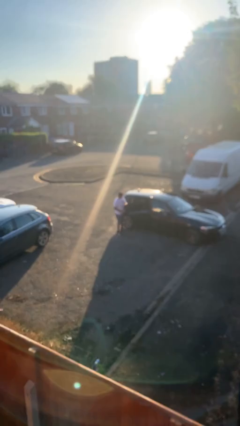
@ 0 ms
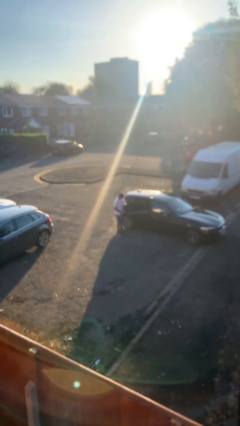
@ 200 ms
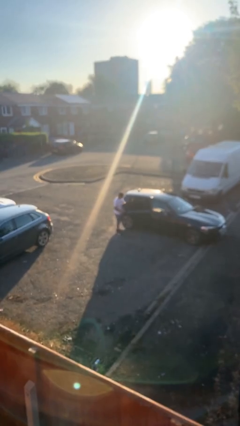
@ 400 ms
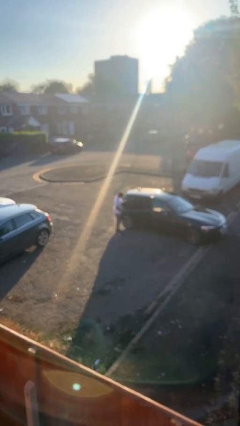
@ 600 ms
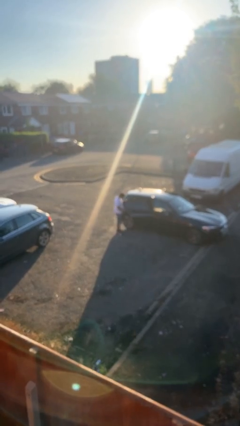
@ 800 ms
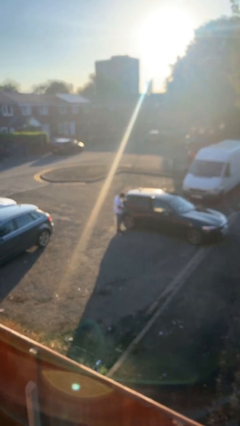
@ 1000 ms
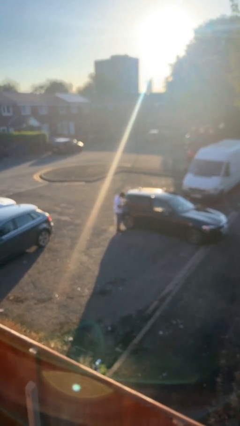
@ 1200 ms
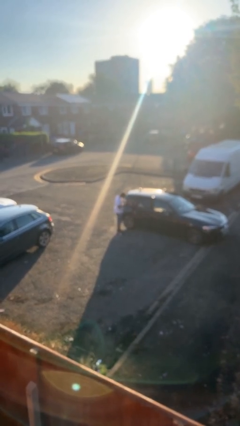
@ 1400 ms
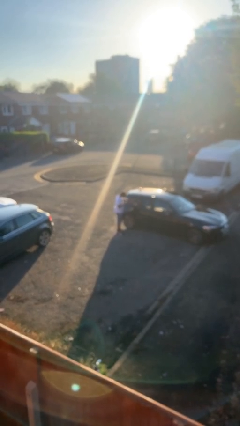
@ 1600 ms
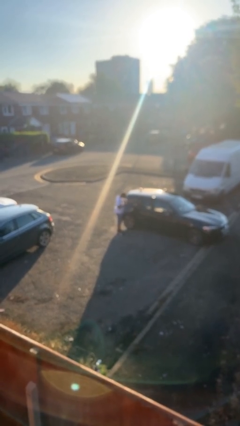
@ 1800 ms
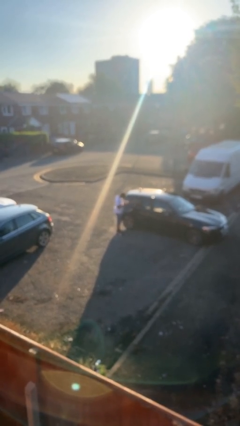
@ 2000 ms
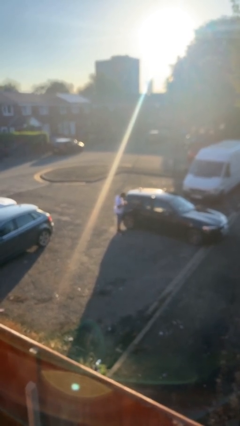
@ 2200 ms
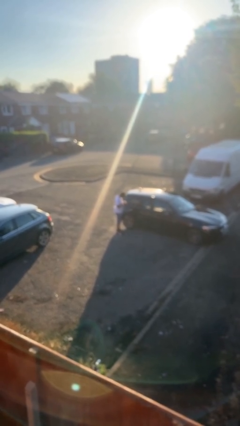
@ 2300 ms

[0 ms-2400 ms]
person closes car door

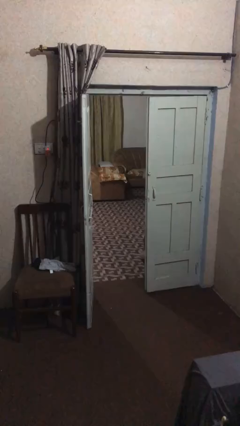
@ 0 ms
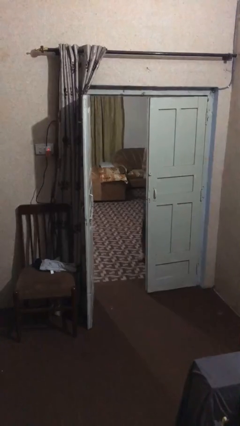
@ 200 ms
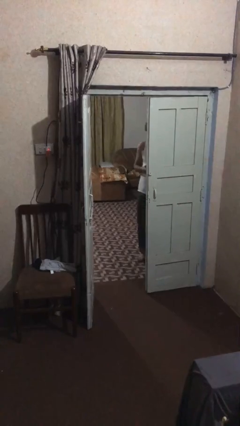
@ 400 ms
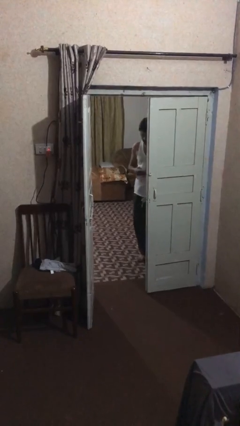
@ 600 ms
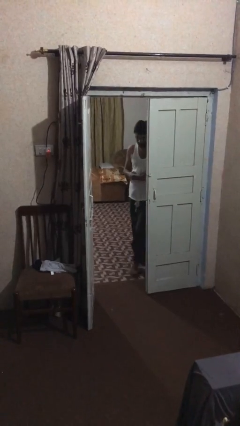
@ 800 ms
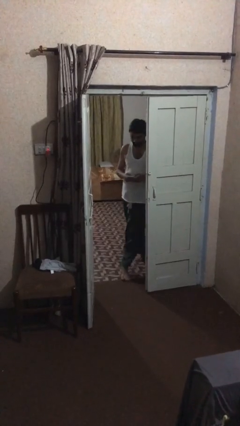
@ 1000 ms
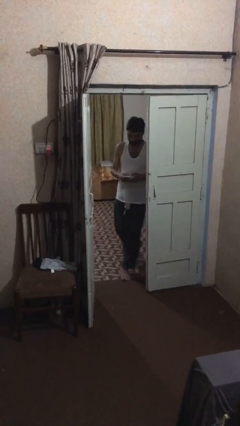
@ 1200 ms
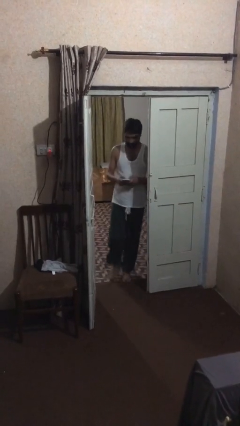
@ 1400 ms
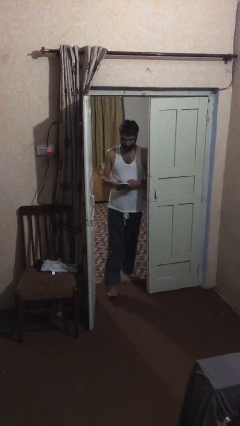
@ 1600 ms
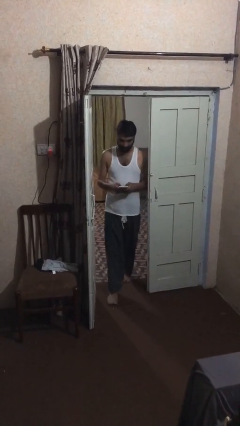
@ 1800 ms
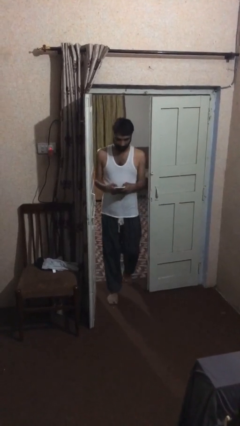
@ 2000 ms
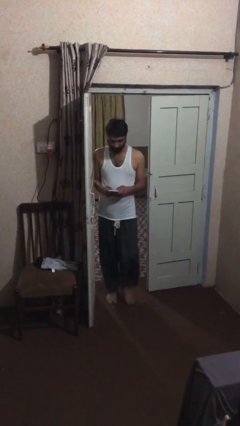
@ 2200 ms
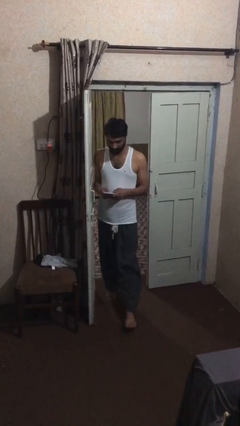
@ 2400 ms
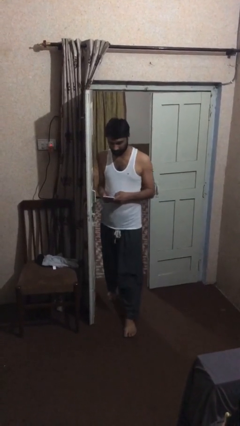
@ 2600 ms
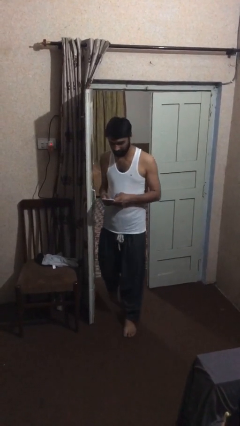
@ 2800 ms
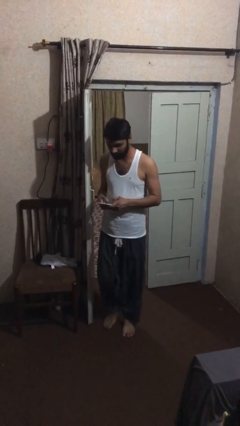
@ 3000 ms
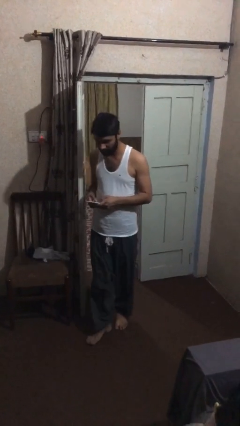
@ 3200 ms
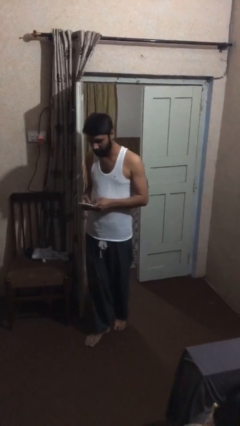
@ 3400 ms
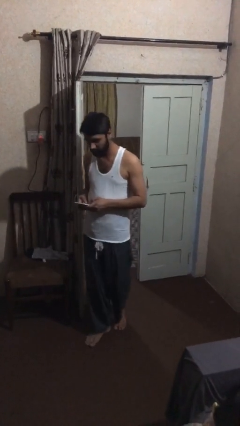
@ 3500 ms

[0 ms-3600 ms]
person enters scene through structure

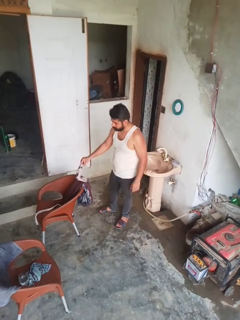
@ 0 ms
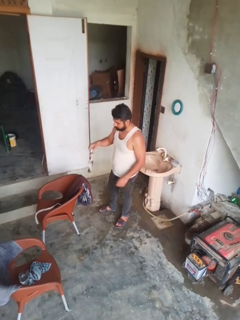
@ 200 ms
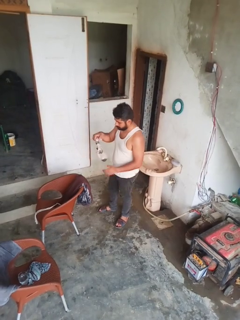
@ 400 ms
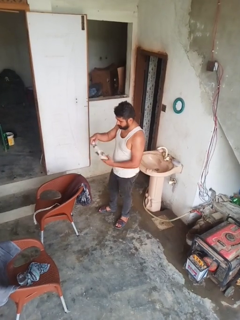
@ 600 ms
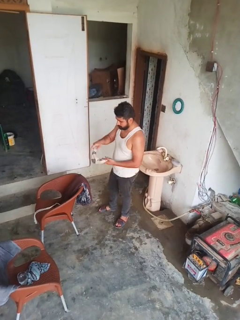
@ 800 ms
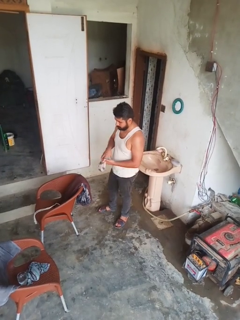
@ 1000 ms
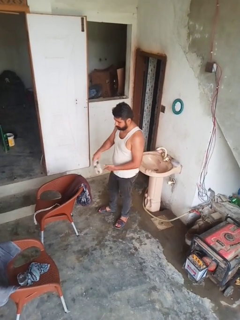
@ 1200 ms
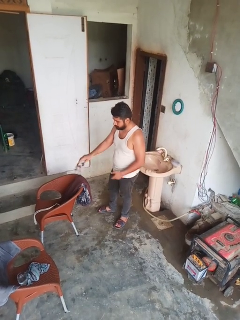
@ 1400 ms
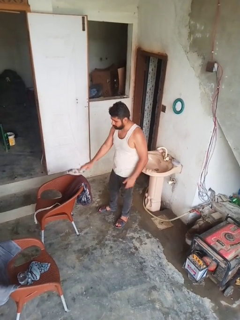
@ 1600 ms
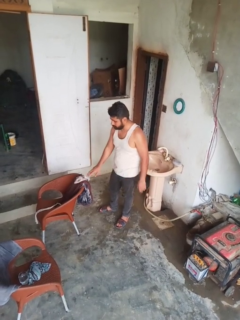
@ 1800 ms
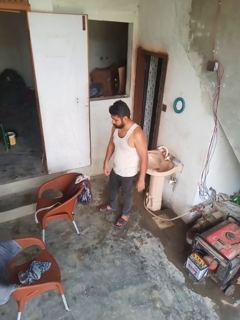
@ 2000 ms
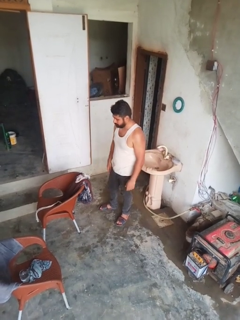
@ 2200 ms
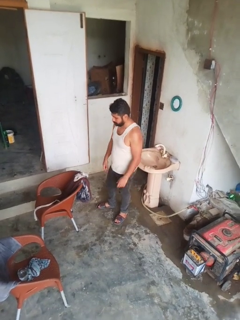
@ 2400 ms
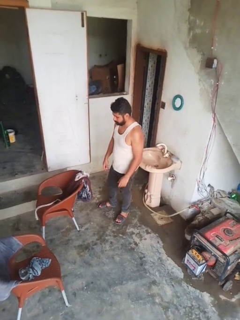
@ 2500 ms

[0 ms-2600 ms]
person folds socks

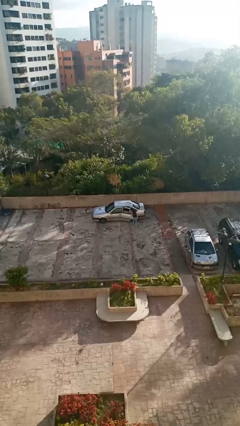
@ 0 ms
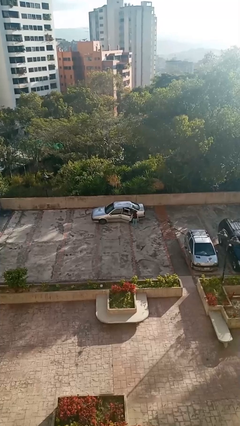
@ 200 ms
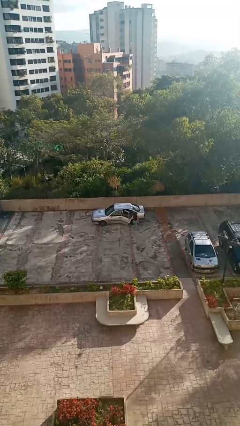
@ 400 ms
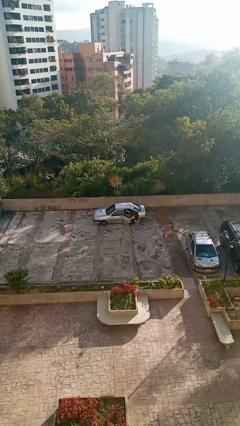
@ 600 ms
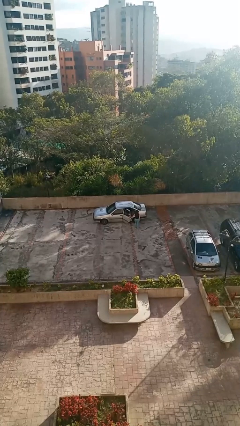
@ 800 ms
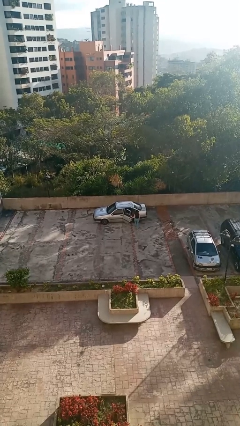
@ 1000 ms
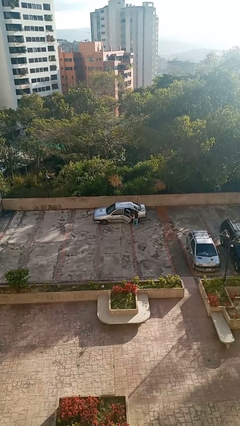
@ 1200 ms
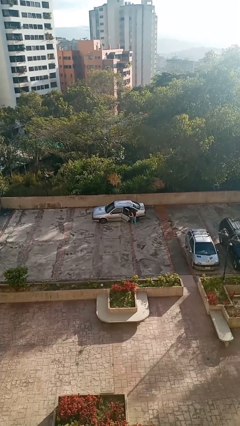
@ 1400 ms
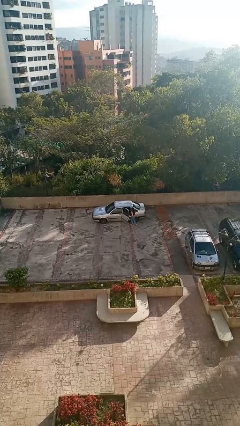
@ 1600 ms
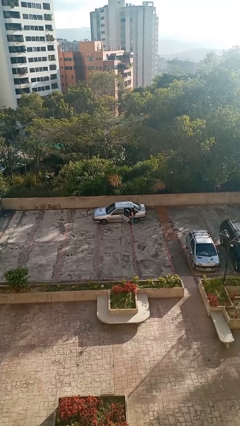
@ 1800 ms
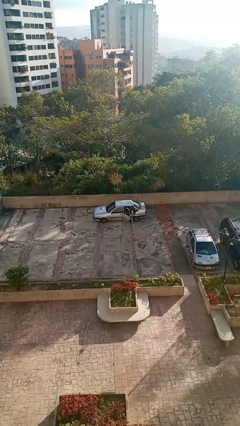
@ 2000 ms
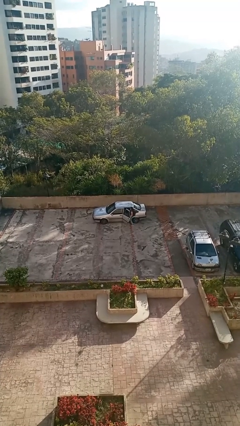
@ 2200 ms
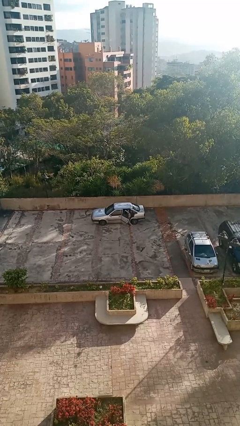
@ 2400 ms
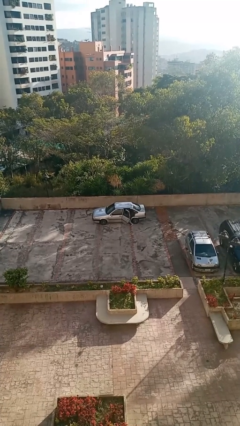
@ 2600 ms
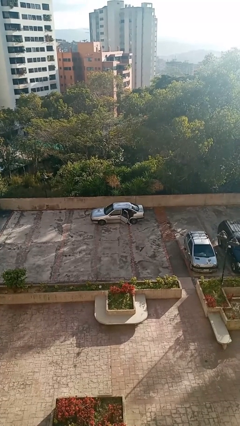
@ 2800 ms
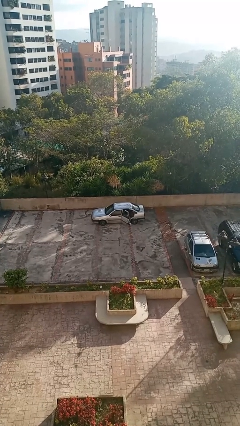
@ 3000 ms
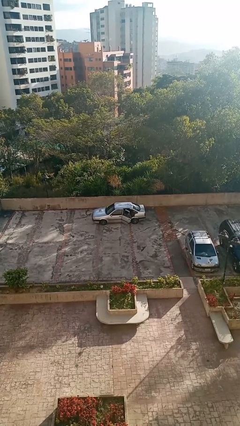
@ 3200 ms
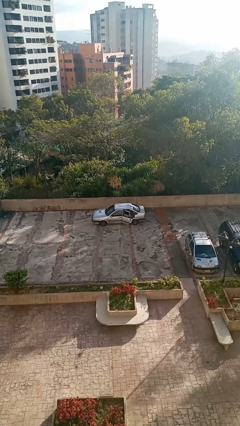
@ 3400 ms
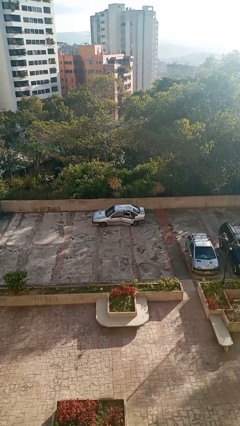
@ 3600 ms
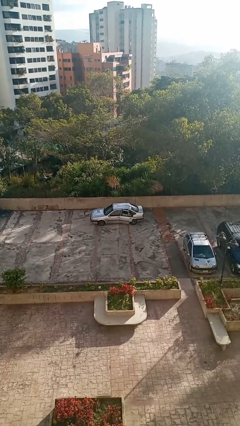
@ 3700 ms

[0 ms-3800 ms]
car picks up person

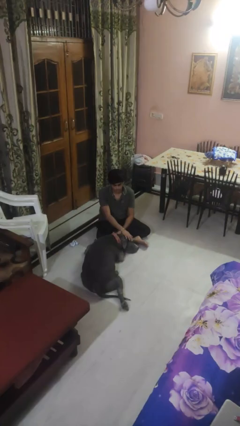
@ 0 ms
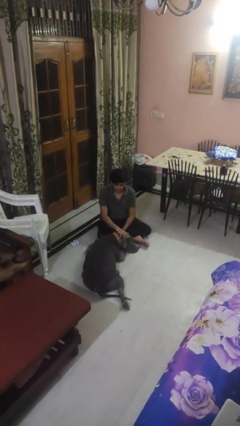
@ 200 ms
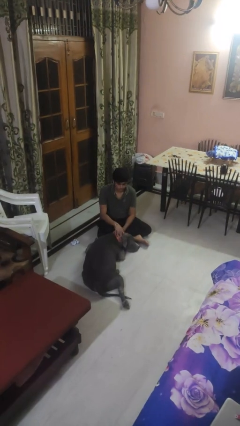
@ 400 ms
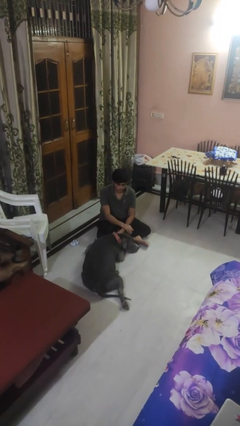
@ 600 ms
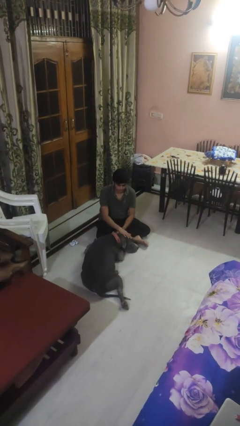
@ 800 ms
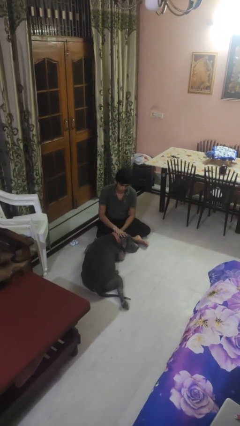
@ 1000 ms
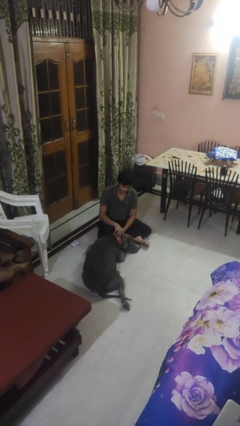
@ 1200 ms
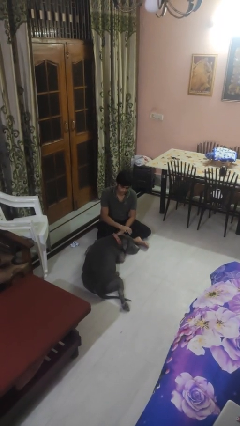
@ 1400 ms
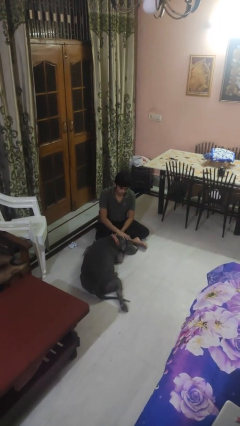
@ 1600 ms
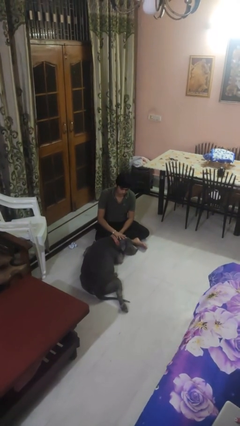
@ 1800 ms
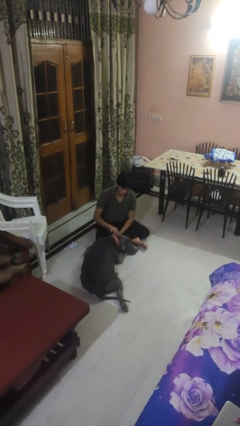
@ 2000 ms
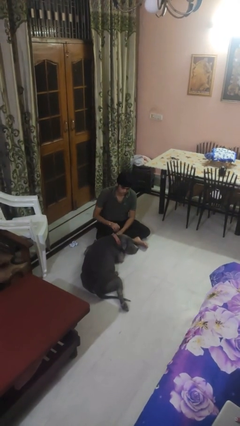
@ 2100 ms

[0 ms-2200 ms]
person pets dog

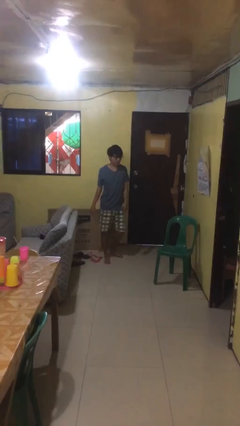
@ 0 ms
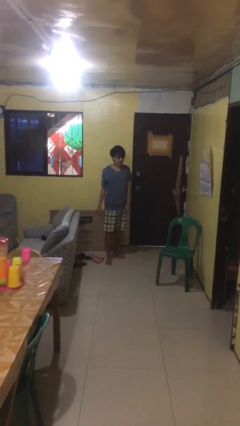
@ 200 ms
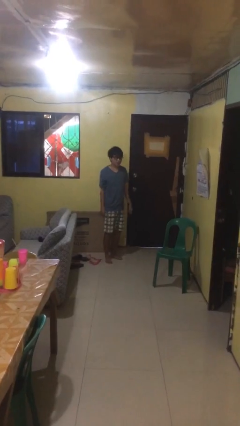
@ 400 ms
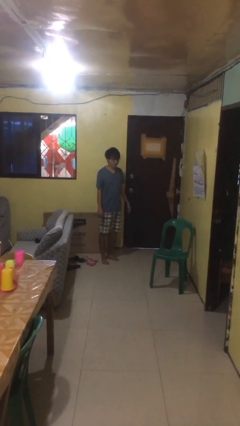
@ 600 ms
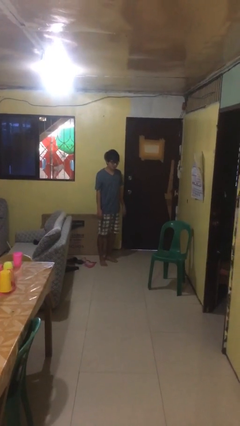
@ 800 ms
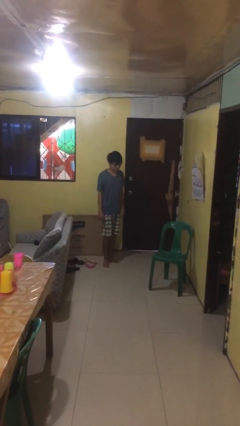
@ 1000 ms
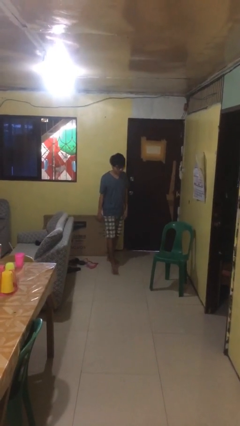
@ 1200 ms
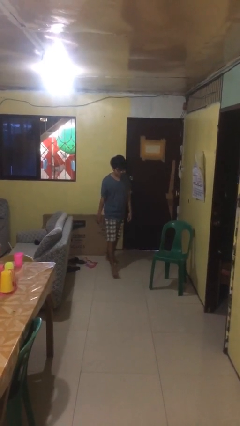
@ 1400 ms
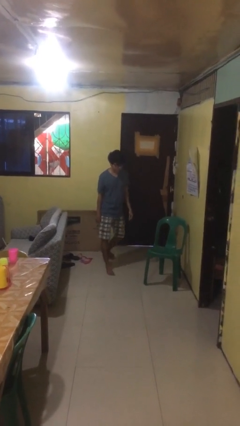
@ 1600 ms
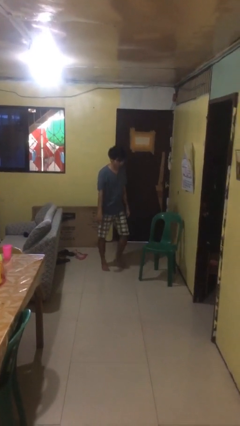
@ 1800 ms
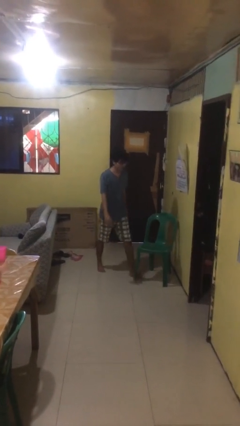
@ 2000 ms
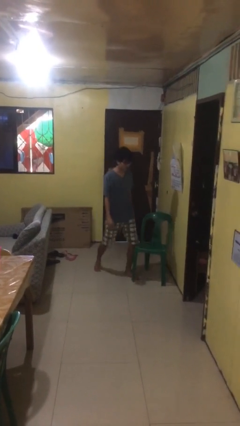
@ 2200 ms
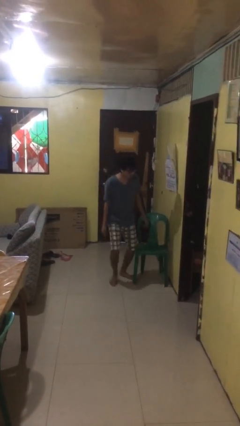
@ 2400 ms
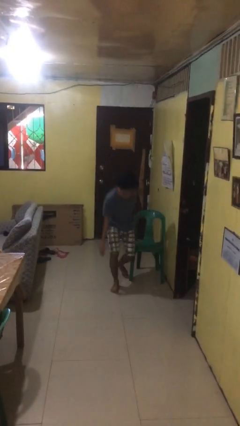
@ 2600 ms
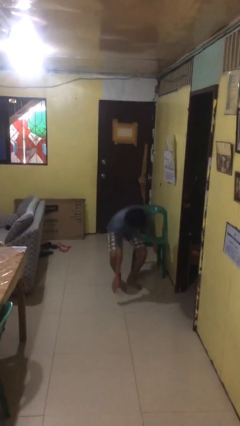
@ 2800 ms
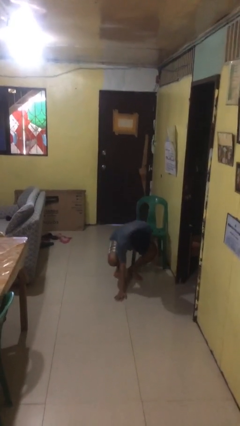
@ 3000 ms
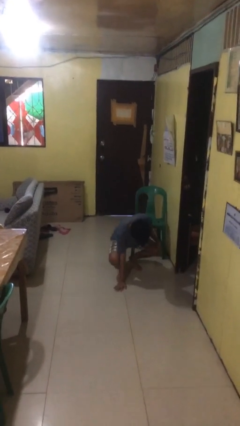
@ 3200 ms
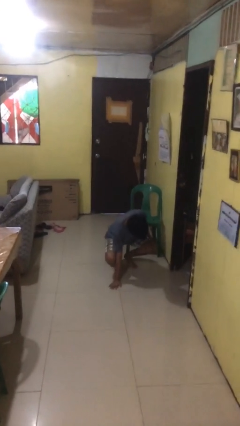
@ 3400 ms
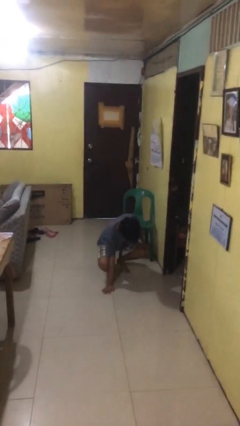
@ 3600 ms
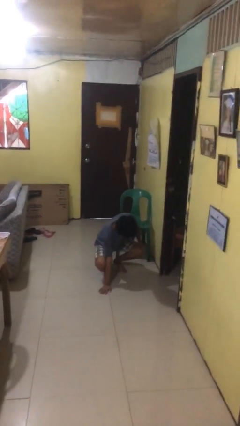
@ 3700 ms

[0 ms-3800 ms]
person trips on object on floor
